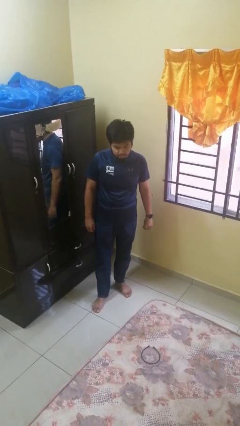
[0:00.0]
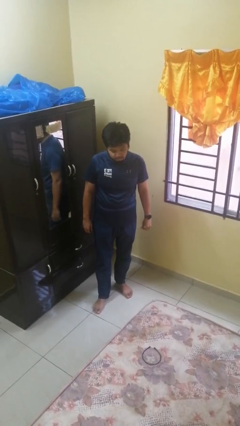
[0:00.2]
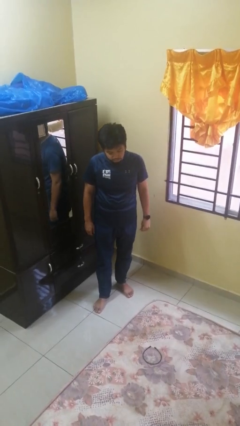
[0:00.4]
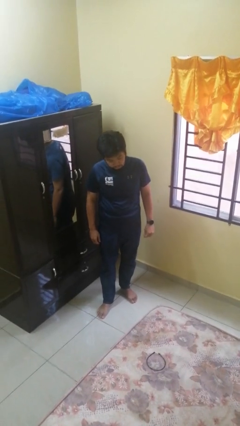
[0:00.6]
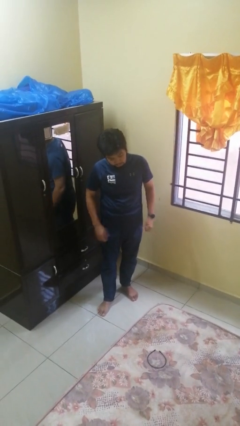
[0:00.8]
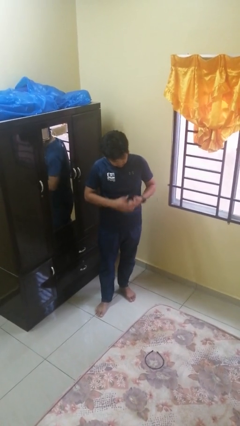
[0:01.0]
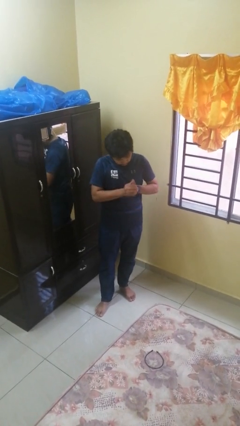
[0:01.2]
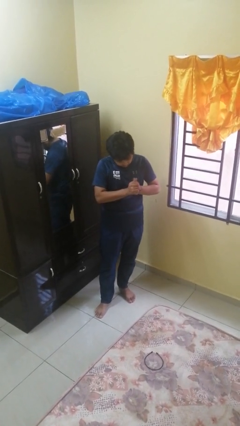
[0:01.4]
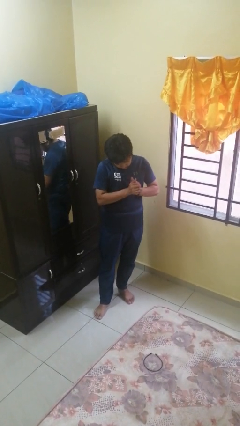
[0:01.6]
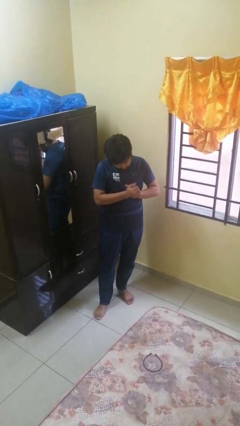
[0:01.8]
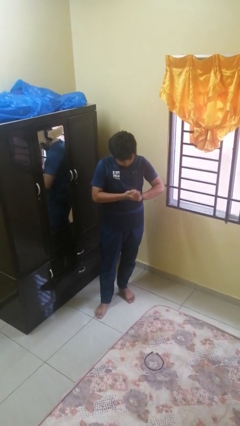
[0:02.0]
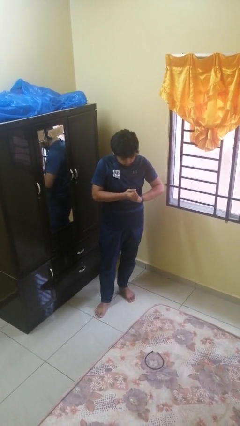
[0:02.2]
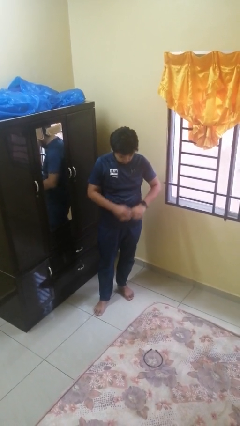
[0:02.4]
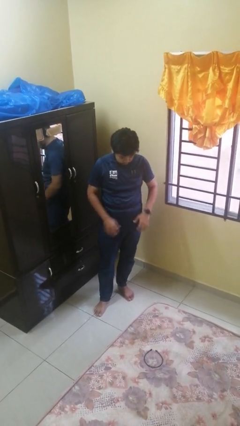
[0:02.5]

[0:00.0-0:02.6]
person cracks knuckles

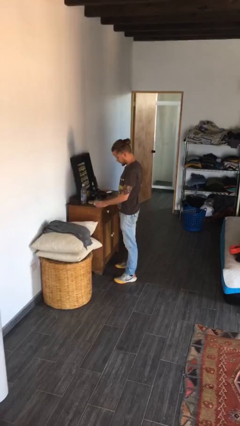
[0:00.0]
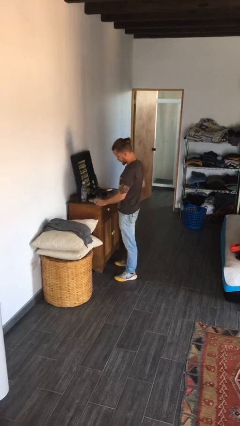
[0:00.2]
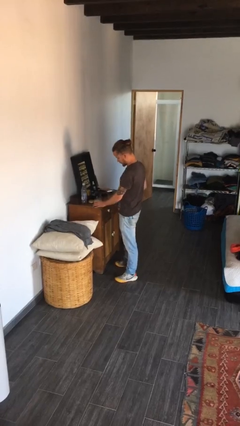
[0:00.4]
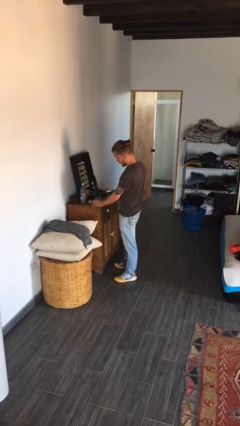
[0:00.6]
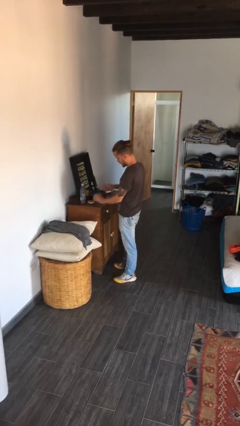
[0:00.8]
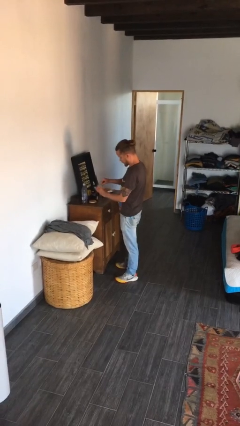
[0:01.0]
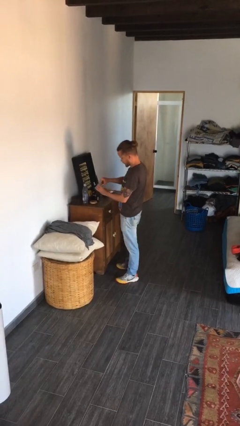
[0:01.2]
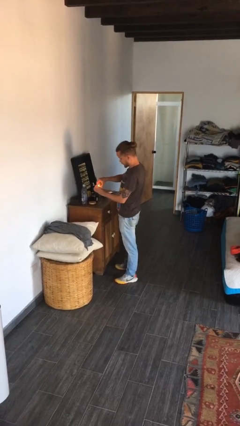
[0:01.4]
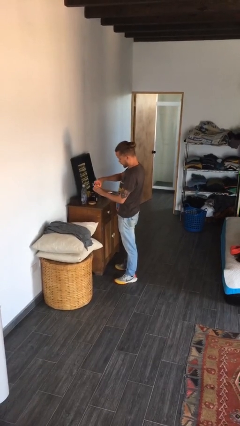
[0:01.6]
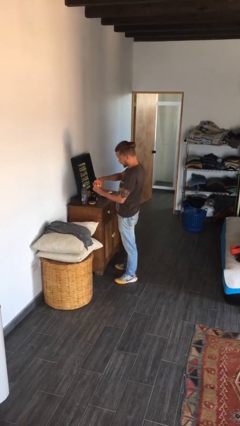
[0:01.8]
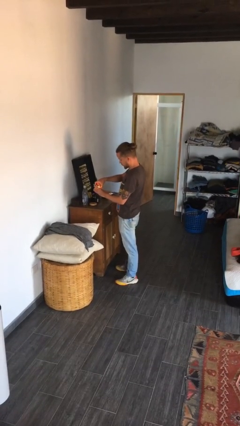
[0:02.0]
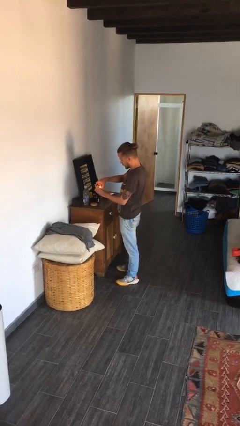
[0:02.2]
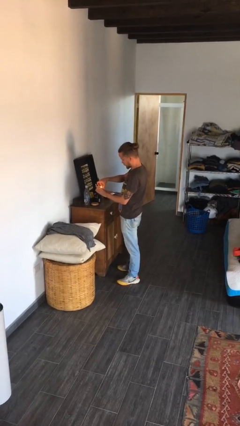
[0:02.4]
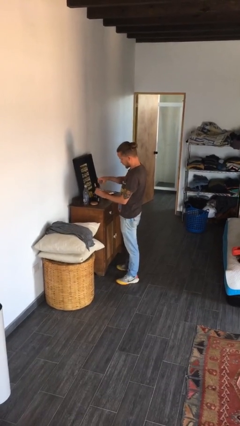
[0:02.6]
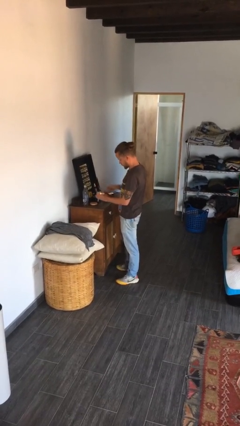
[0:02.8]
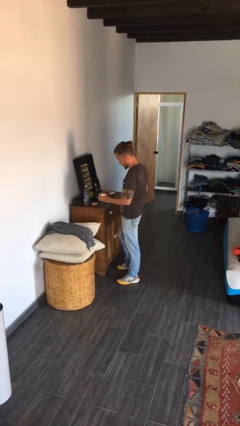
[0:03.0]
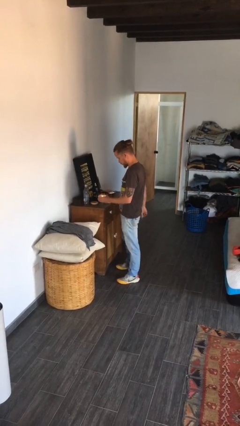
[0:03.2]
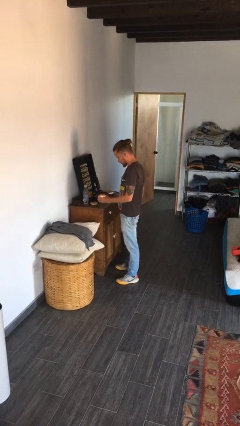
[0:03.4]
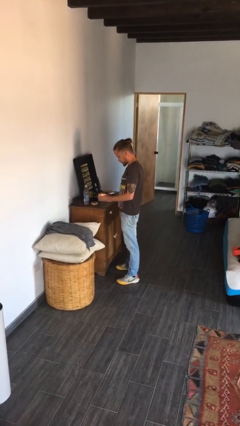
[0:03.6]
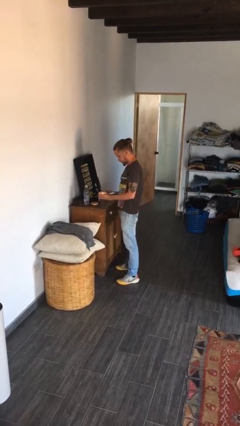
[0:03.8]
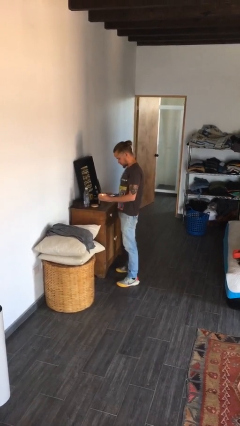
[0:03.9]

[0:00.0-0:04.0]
person lights candle

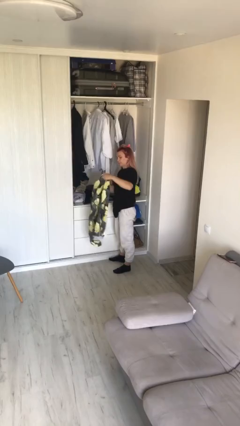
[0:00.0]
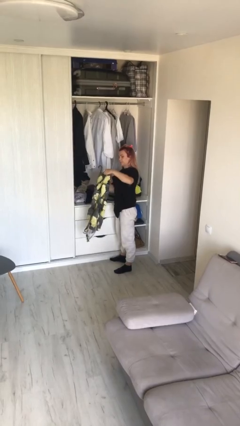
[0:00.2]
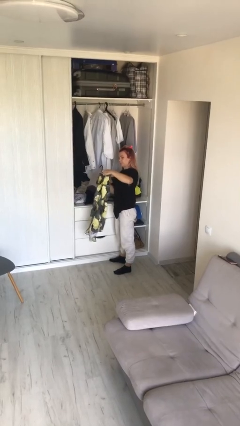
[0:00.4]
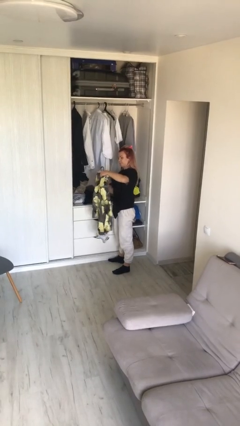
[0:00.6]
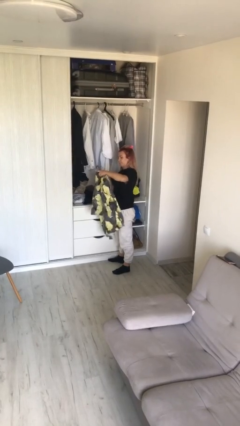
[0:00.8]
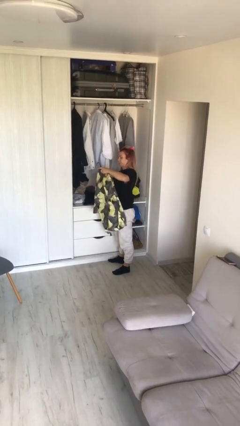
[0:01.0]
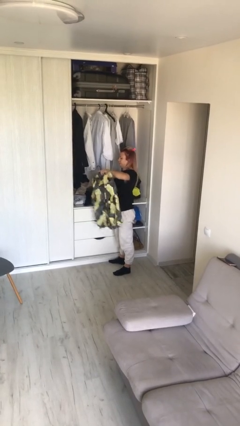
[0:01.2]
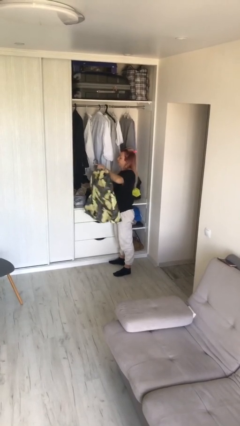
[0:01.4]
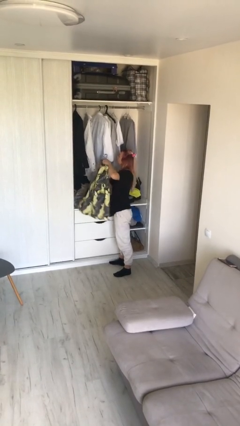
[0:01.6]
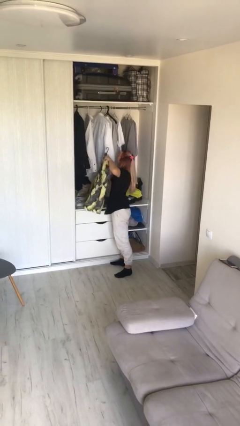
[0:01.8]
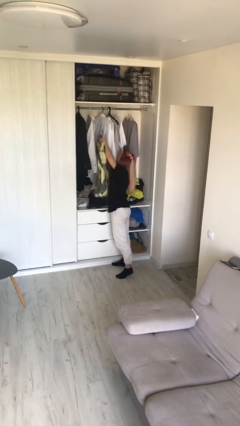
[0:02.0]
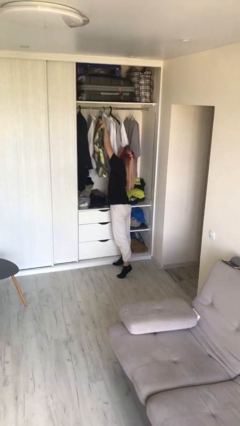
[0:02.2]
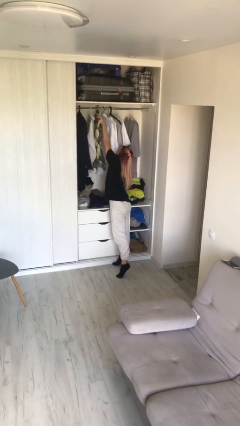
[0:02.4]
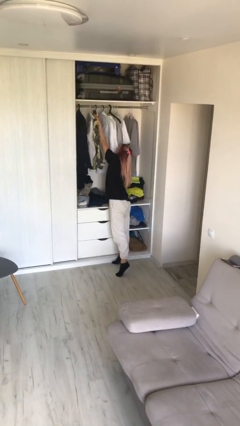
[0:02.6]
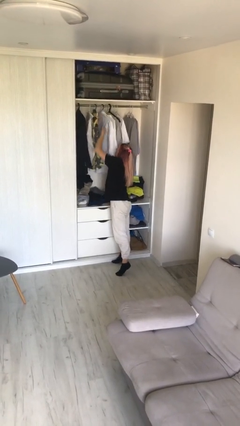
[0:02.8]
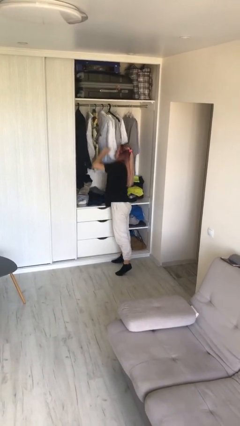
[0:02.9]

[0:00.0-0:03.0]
person puts clothes into closet

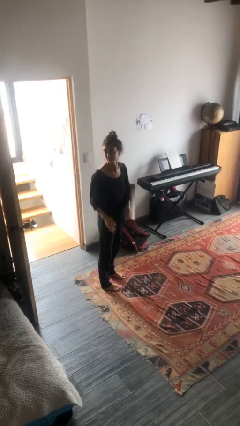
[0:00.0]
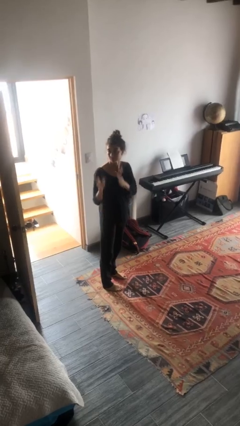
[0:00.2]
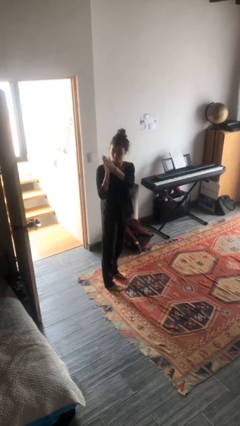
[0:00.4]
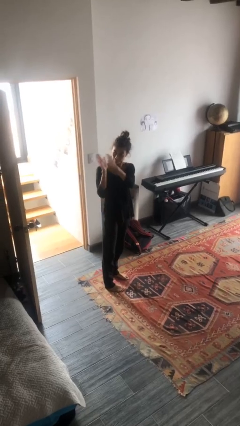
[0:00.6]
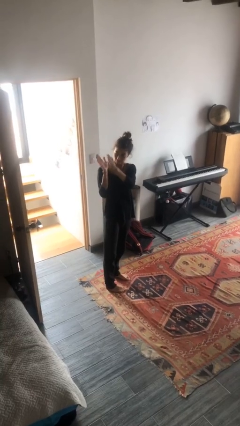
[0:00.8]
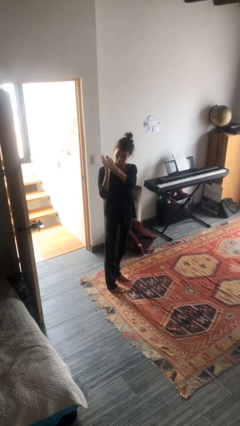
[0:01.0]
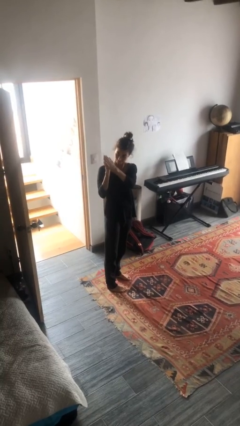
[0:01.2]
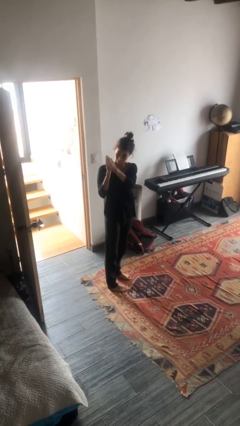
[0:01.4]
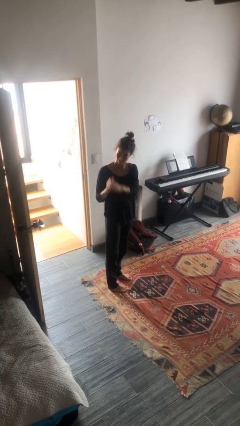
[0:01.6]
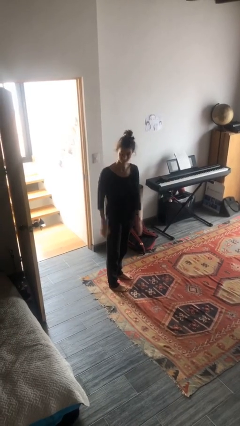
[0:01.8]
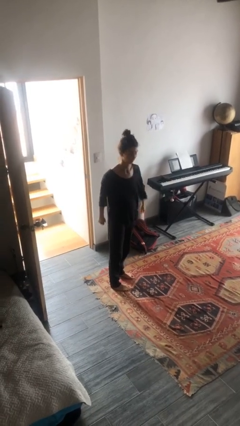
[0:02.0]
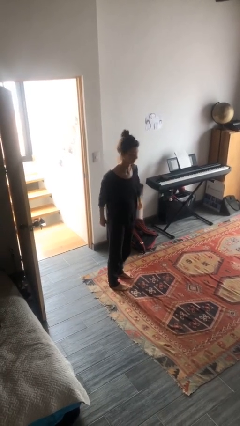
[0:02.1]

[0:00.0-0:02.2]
person claps hands

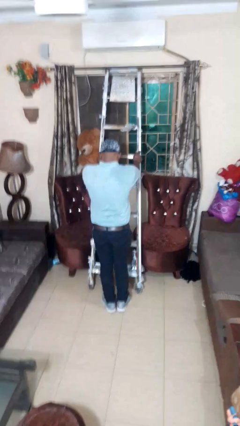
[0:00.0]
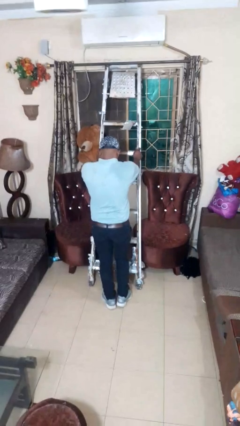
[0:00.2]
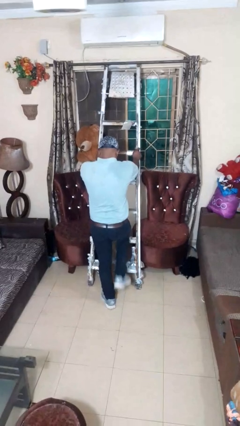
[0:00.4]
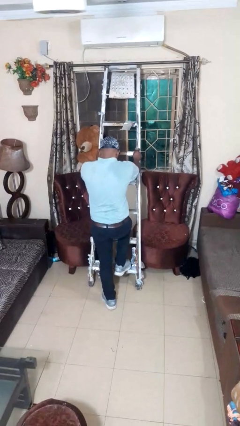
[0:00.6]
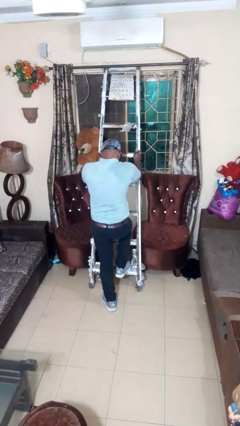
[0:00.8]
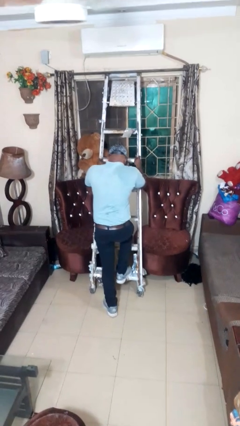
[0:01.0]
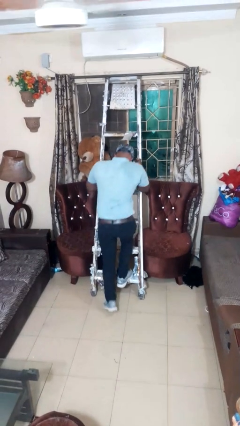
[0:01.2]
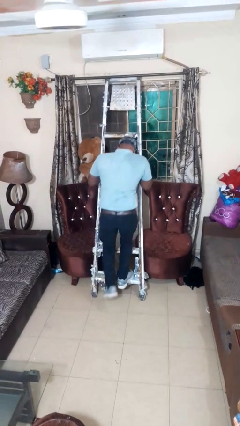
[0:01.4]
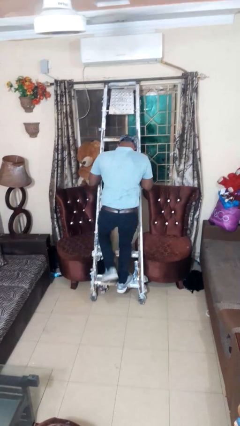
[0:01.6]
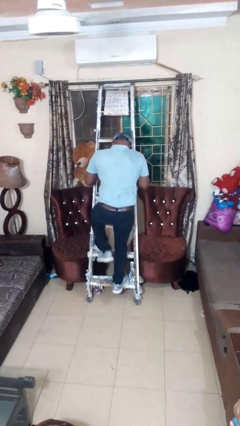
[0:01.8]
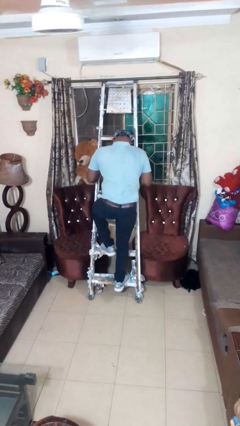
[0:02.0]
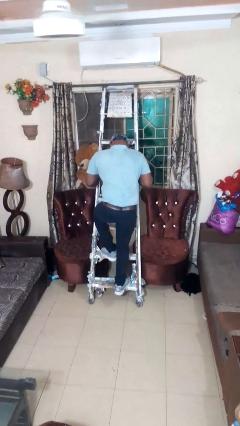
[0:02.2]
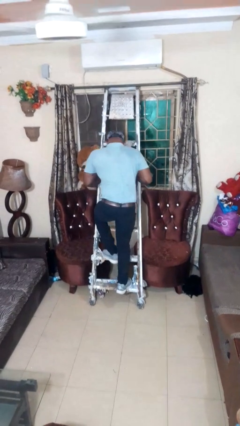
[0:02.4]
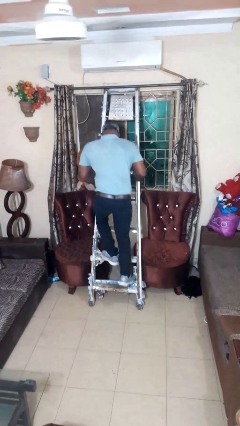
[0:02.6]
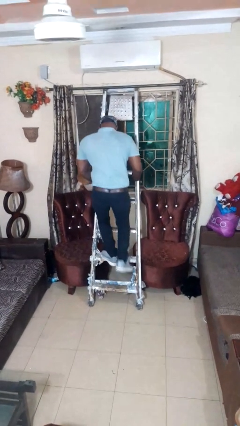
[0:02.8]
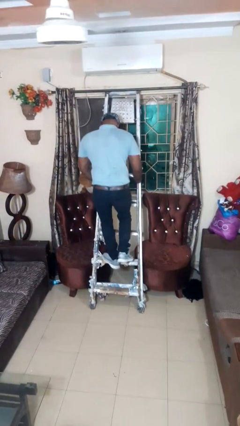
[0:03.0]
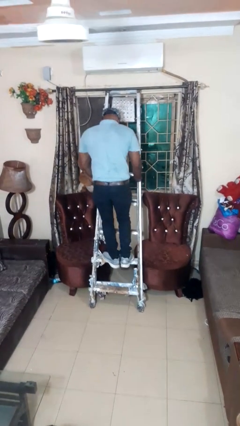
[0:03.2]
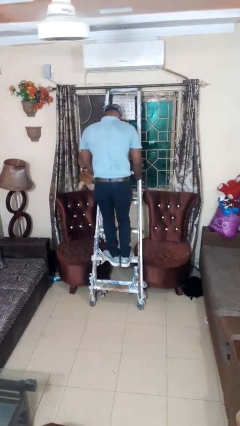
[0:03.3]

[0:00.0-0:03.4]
person climbs up ladder

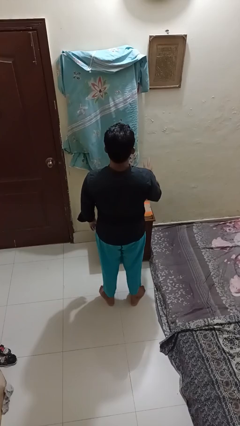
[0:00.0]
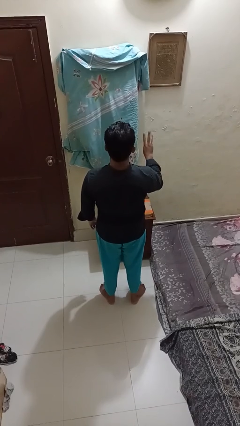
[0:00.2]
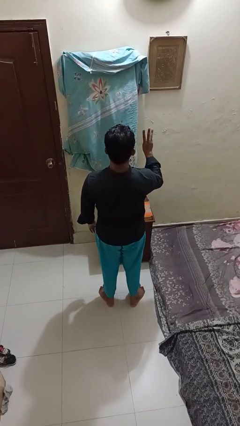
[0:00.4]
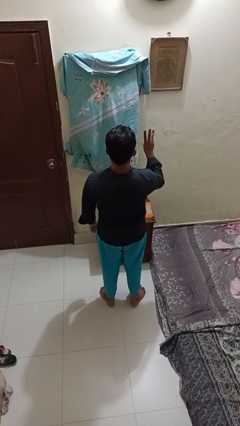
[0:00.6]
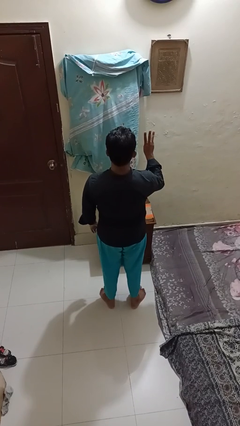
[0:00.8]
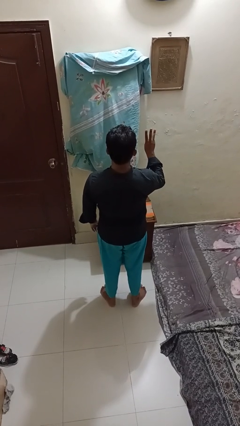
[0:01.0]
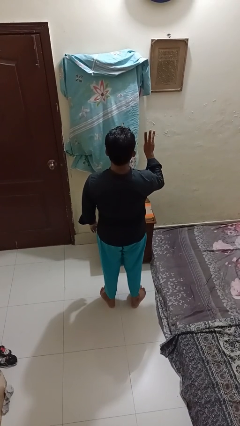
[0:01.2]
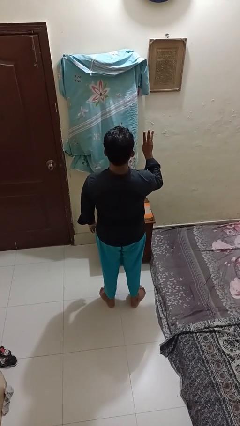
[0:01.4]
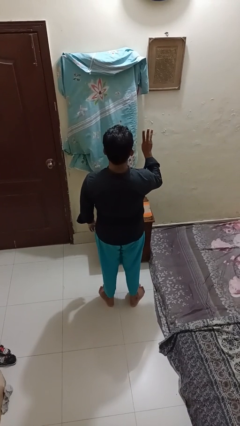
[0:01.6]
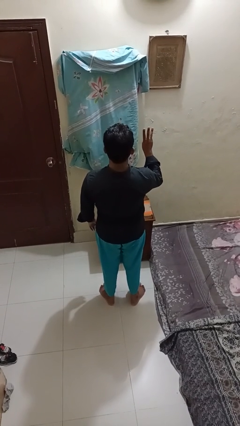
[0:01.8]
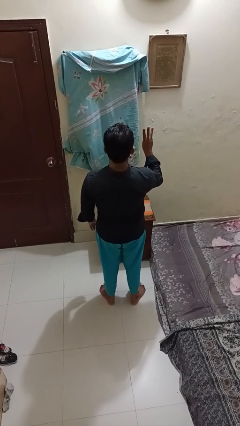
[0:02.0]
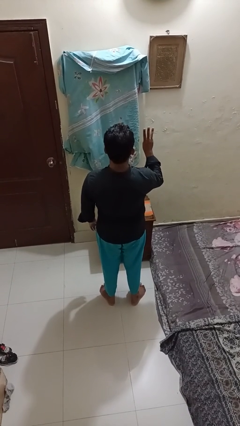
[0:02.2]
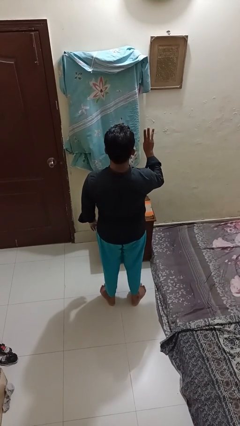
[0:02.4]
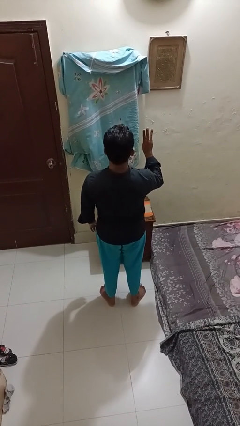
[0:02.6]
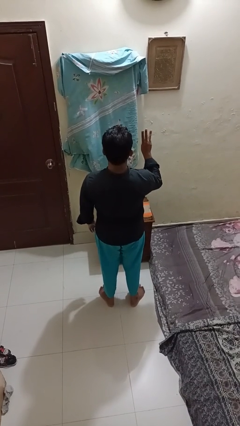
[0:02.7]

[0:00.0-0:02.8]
person gestures number three
